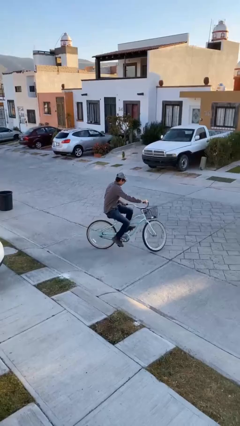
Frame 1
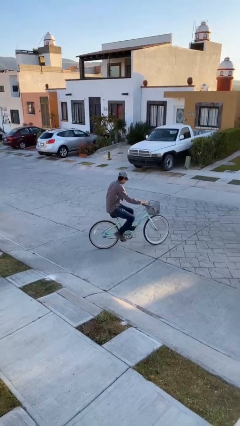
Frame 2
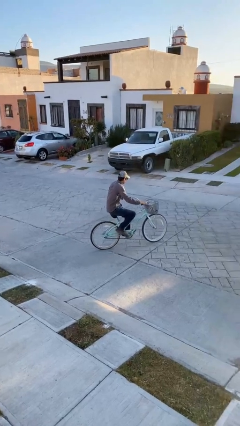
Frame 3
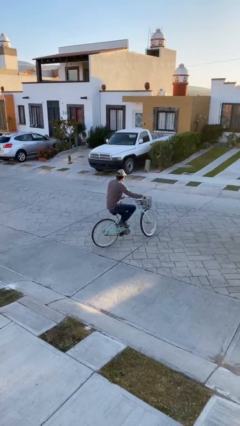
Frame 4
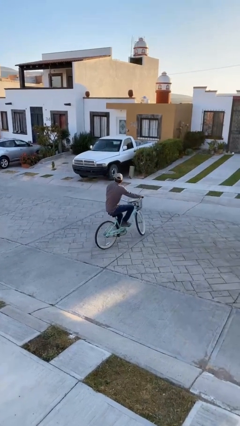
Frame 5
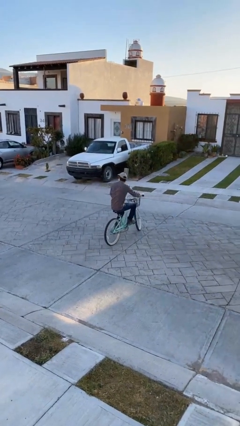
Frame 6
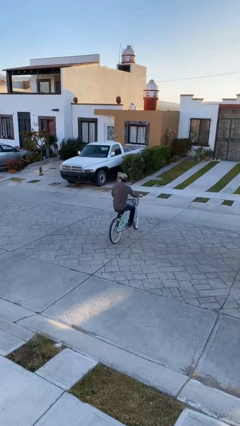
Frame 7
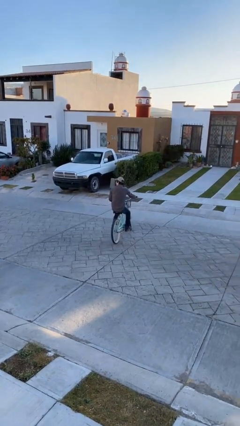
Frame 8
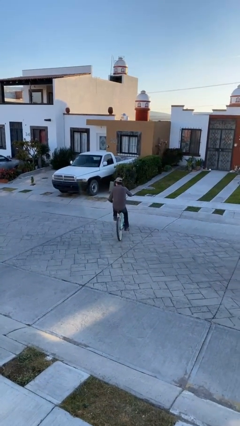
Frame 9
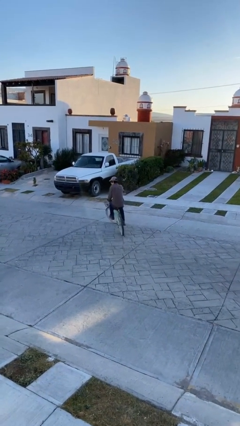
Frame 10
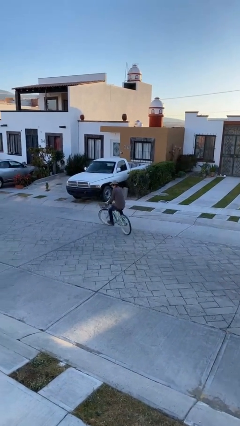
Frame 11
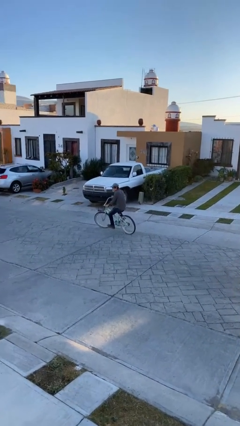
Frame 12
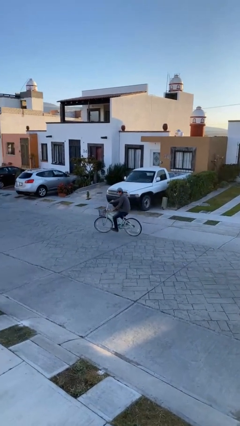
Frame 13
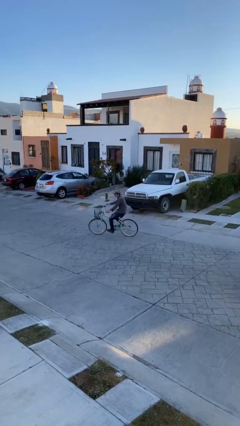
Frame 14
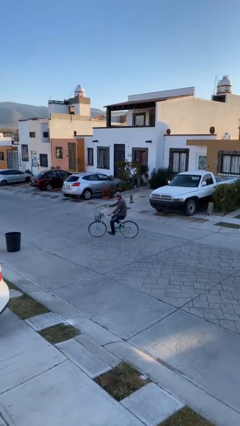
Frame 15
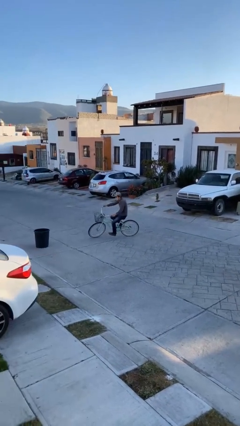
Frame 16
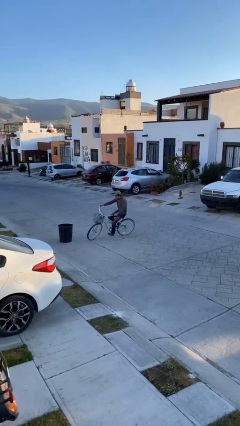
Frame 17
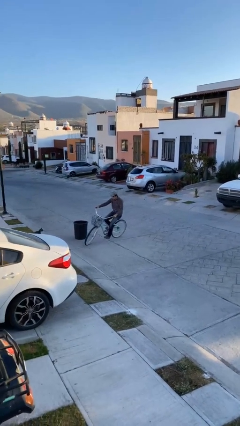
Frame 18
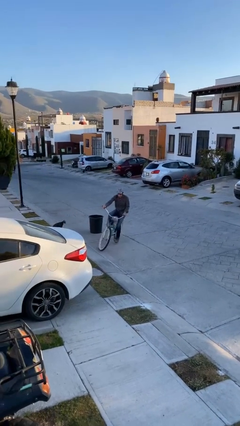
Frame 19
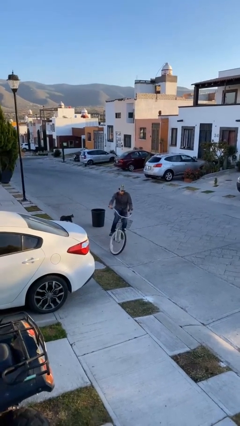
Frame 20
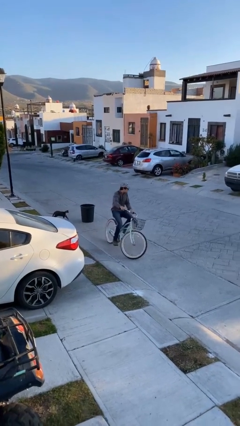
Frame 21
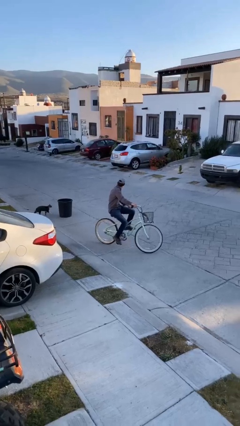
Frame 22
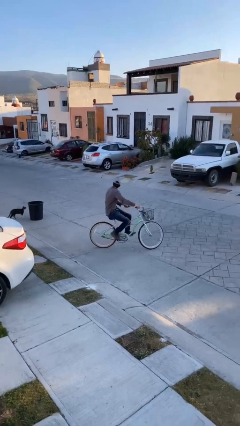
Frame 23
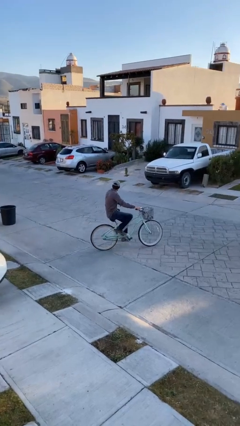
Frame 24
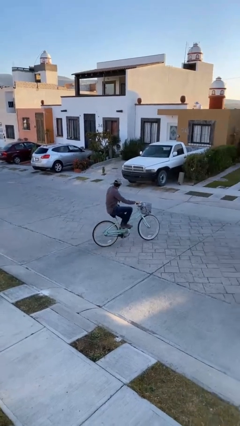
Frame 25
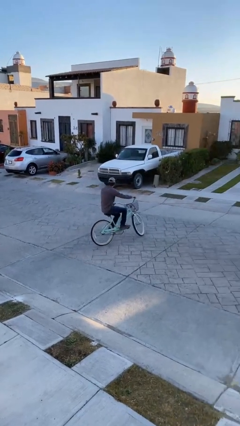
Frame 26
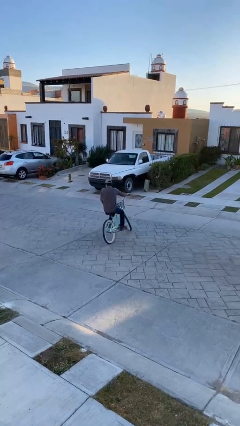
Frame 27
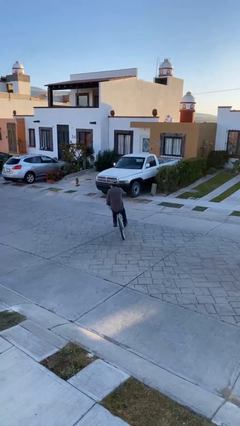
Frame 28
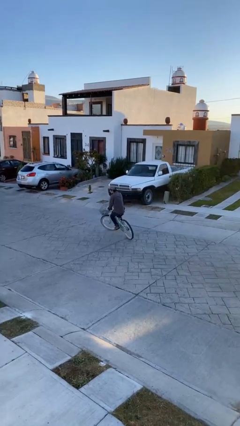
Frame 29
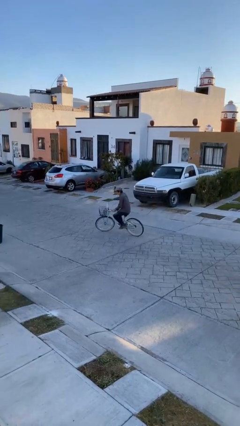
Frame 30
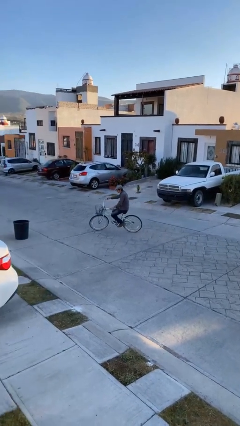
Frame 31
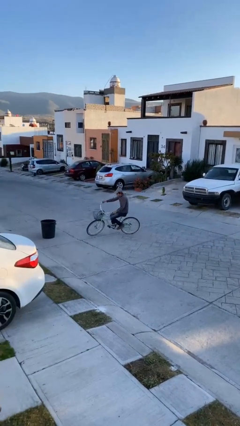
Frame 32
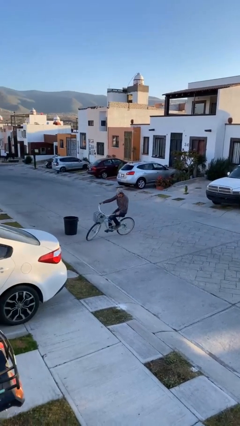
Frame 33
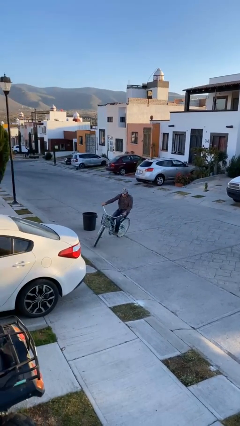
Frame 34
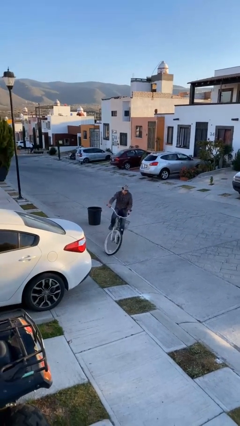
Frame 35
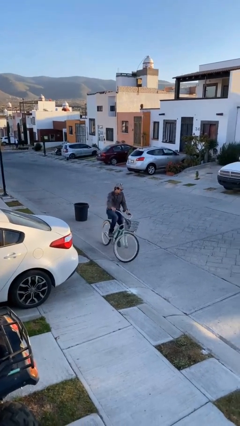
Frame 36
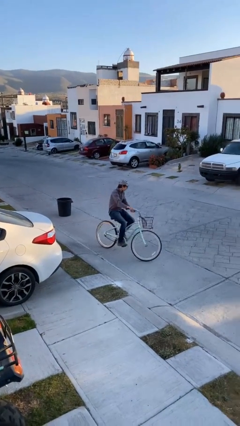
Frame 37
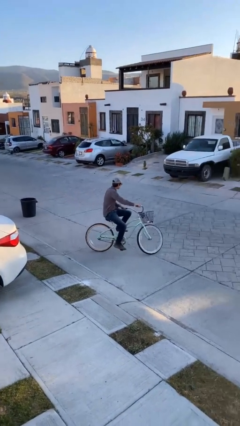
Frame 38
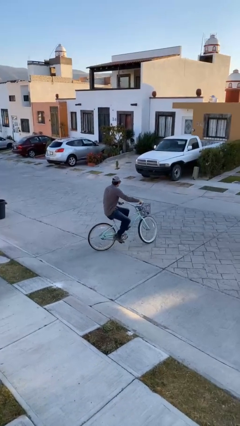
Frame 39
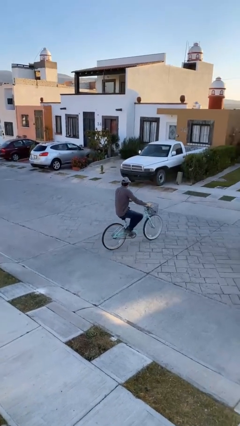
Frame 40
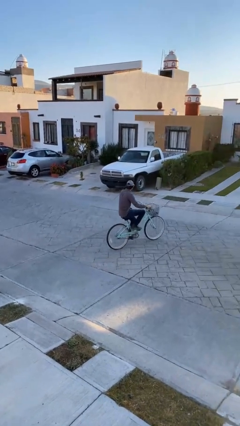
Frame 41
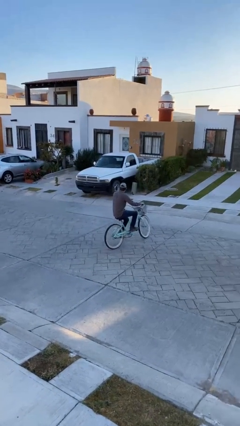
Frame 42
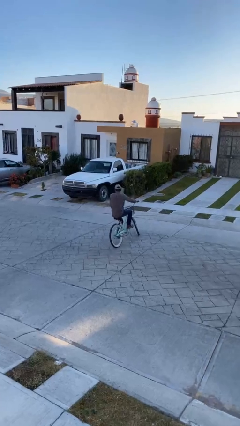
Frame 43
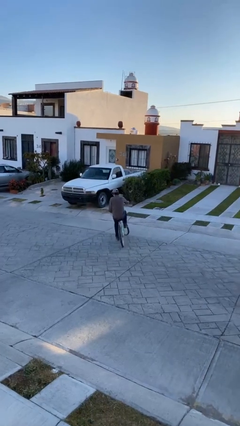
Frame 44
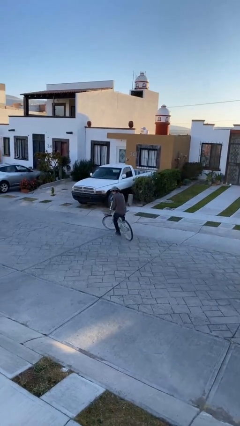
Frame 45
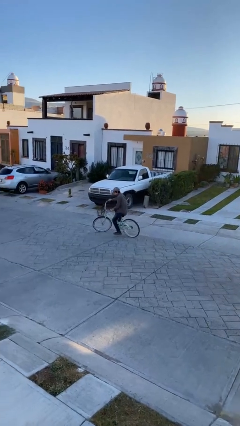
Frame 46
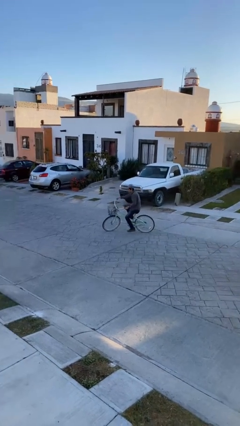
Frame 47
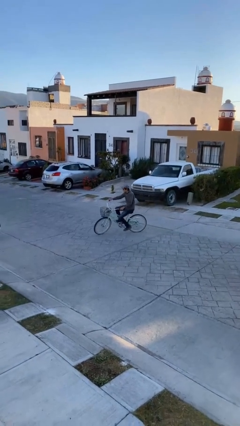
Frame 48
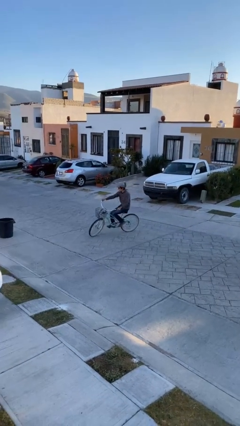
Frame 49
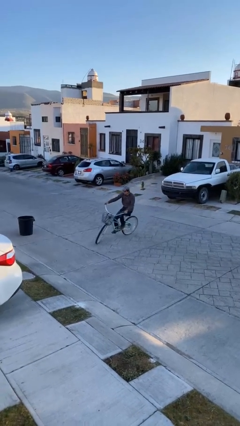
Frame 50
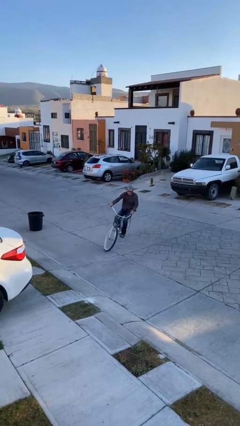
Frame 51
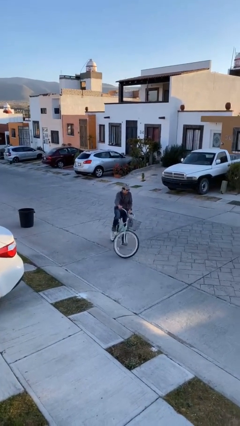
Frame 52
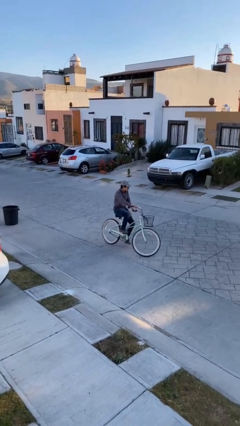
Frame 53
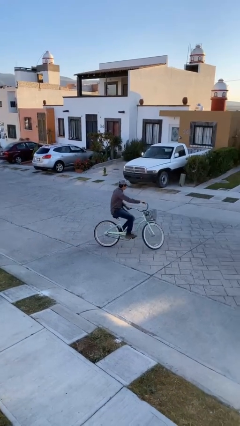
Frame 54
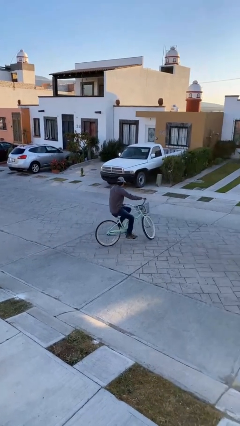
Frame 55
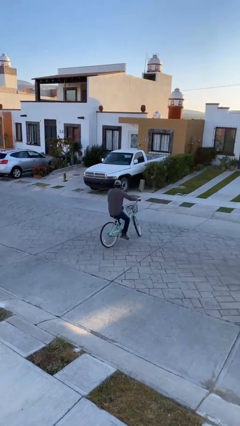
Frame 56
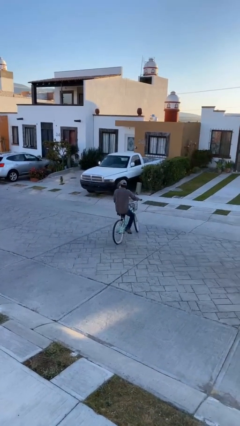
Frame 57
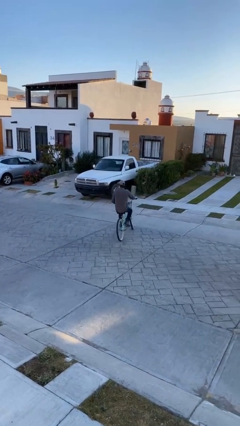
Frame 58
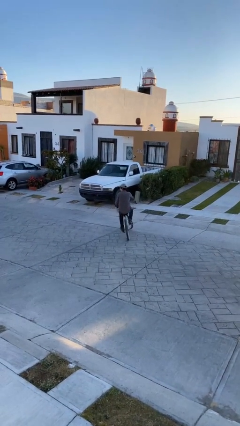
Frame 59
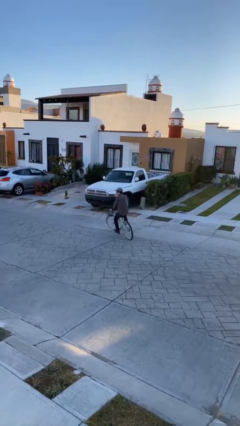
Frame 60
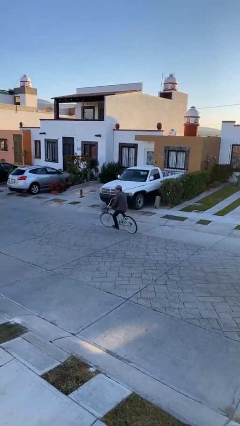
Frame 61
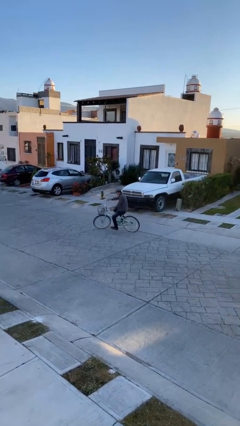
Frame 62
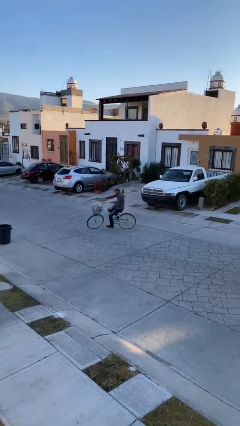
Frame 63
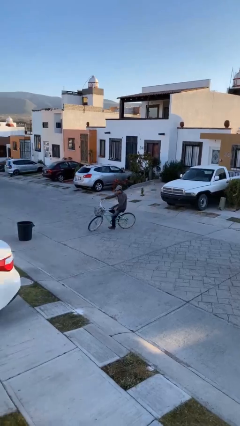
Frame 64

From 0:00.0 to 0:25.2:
person rides bicycle

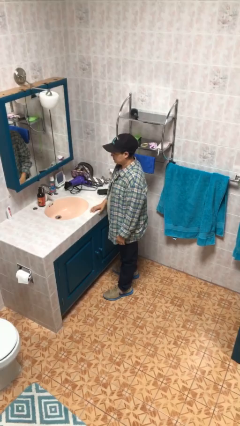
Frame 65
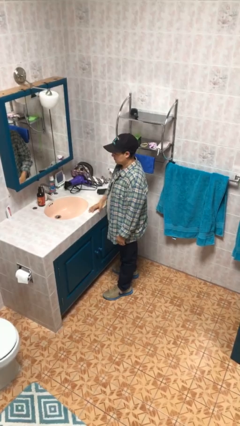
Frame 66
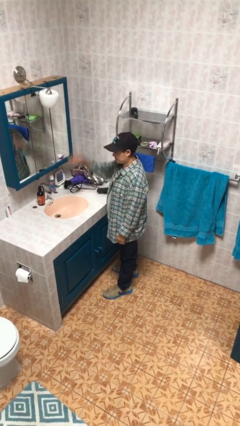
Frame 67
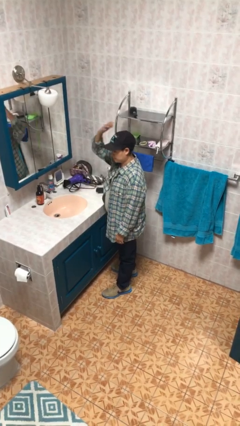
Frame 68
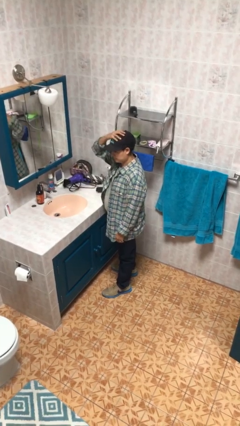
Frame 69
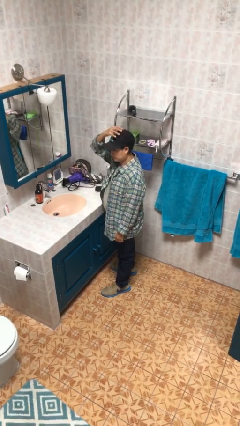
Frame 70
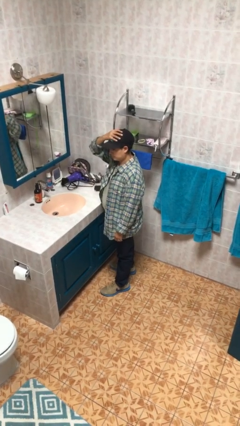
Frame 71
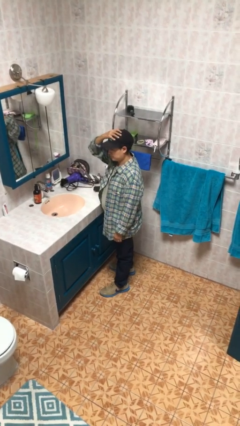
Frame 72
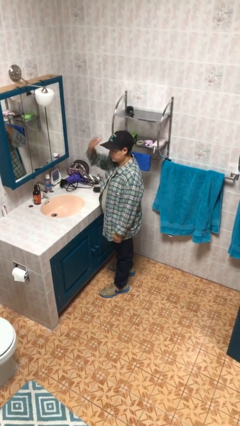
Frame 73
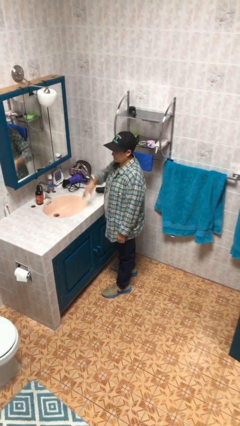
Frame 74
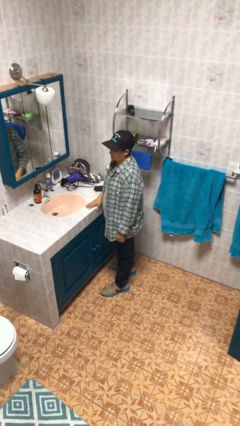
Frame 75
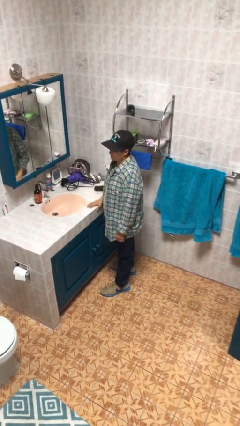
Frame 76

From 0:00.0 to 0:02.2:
person pats head

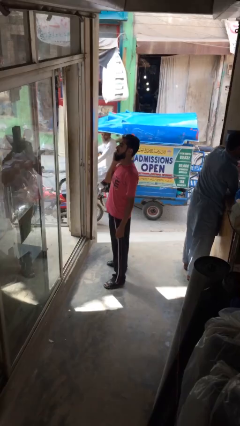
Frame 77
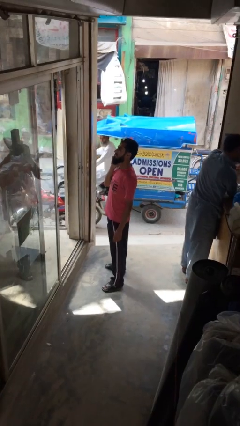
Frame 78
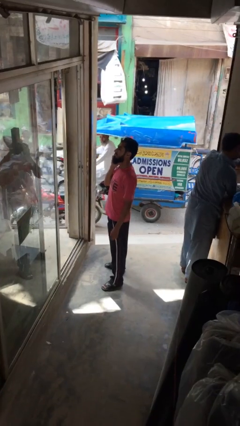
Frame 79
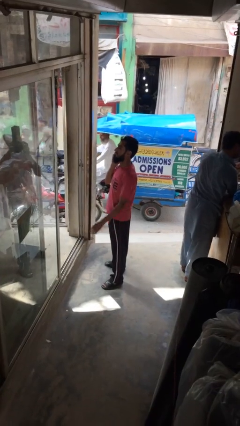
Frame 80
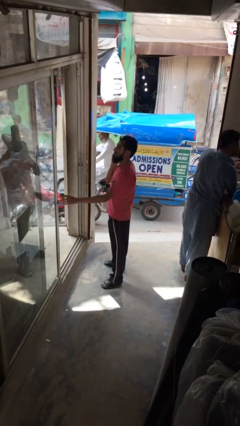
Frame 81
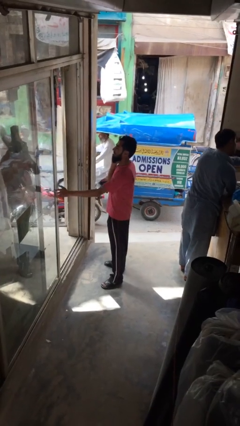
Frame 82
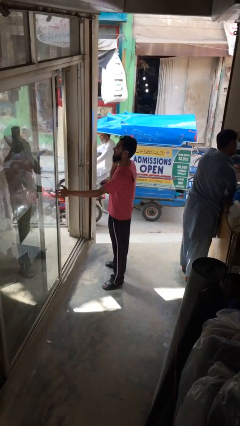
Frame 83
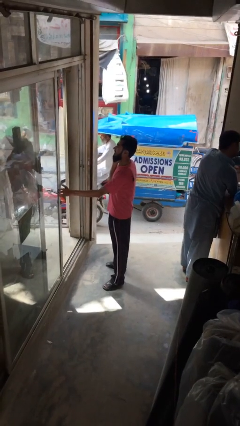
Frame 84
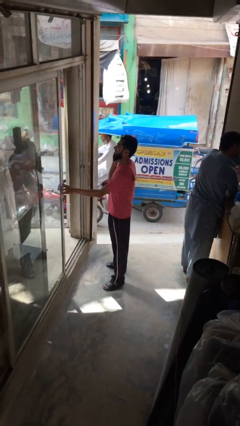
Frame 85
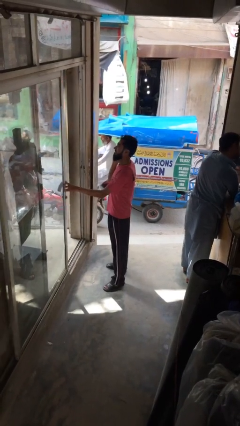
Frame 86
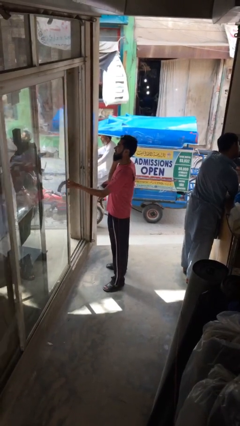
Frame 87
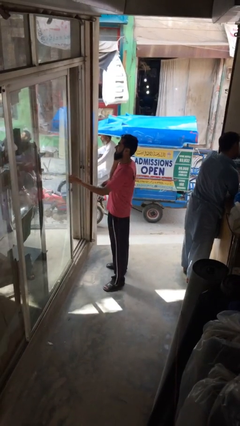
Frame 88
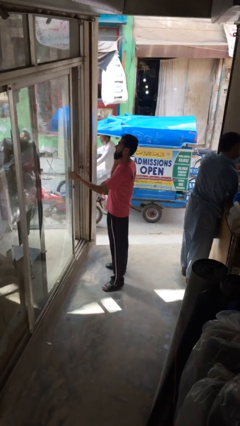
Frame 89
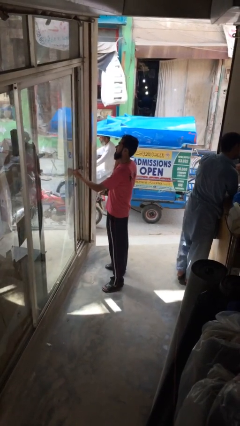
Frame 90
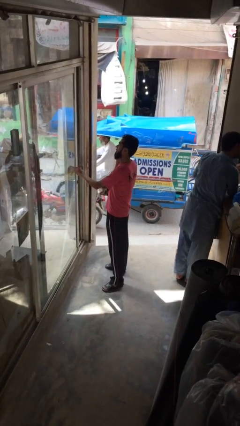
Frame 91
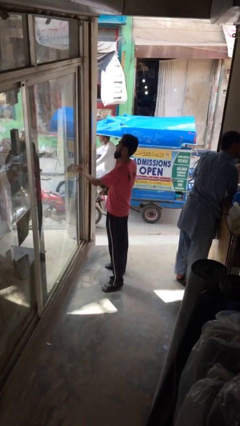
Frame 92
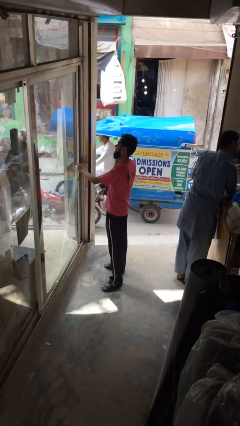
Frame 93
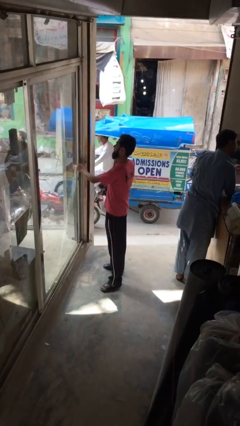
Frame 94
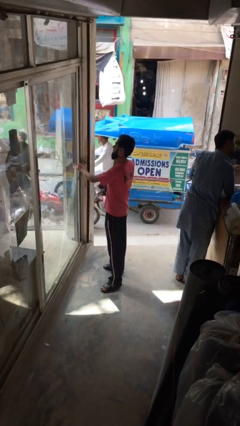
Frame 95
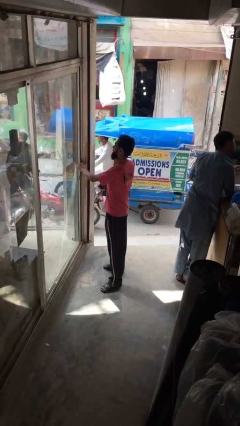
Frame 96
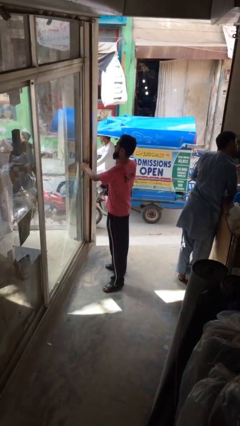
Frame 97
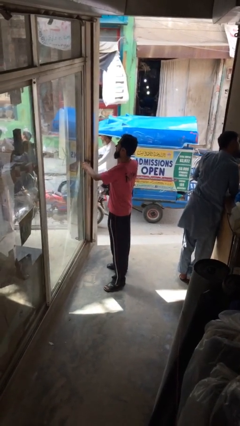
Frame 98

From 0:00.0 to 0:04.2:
person closes facility door
